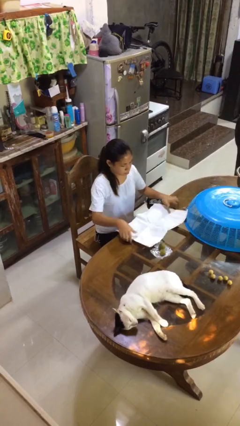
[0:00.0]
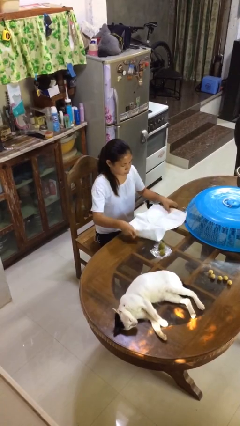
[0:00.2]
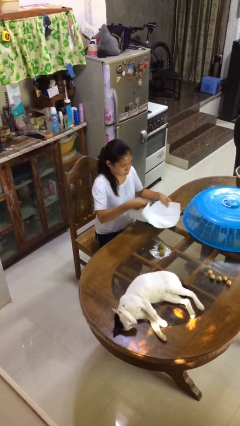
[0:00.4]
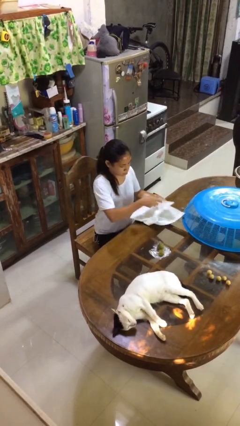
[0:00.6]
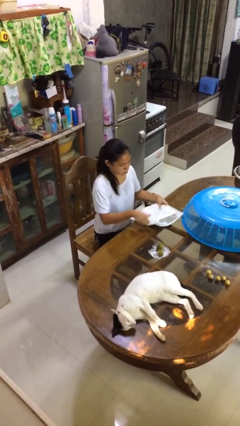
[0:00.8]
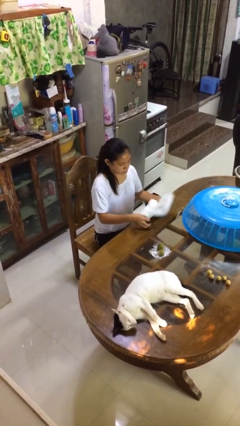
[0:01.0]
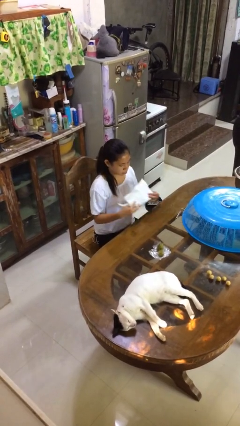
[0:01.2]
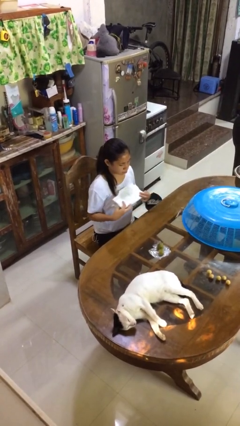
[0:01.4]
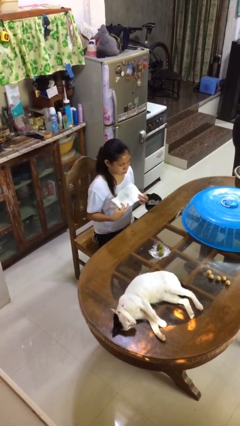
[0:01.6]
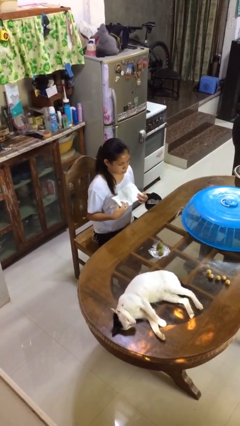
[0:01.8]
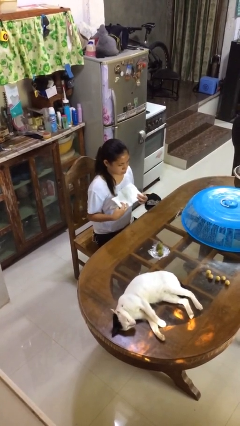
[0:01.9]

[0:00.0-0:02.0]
person folds tablecloth

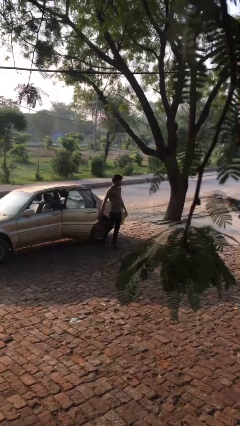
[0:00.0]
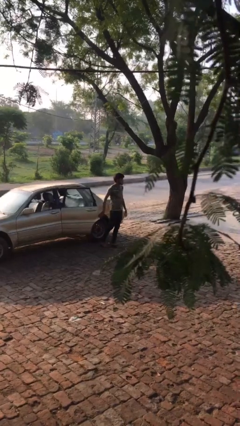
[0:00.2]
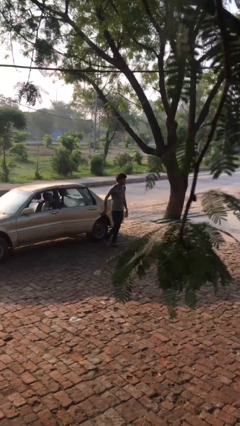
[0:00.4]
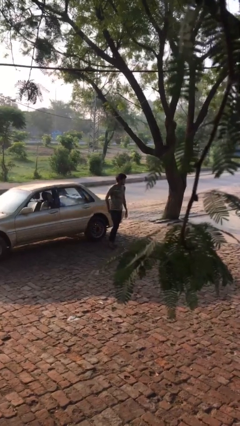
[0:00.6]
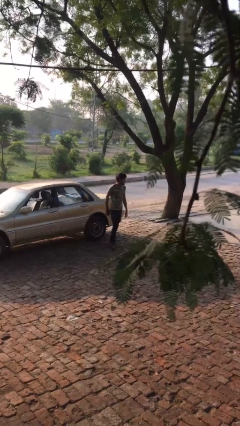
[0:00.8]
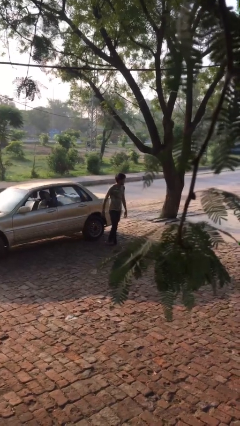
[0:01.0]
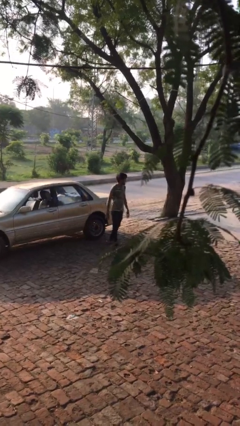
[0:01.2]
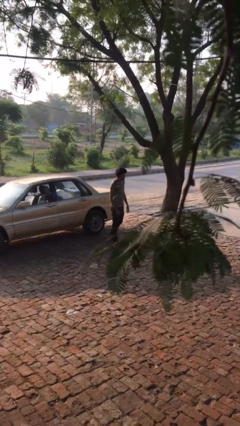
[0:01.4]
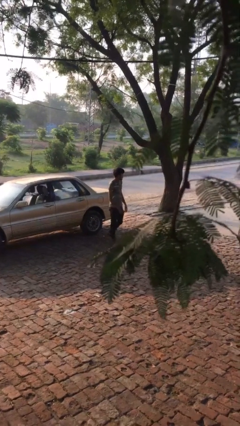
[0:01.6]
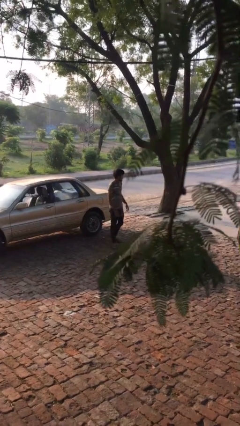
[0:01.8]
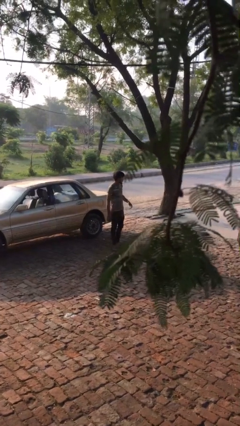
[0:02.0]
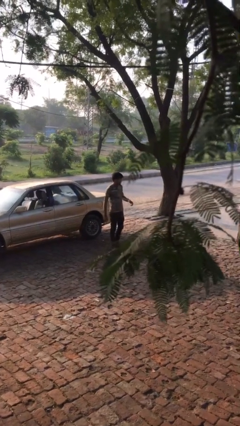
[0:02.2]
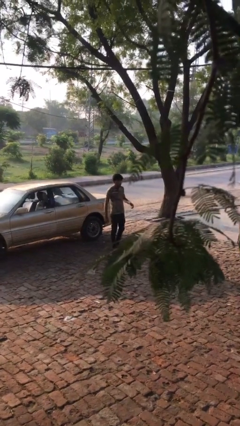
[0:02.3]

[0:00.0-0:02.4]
person closes car door

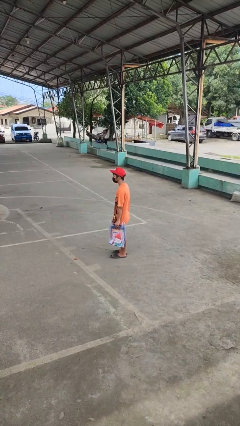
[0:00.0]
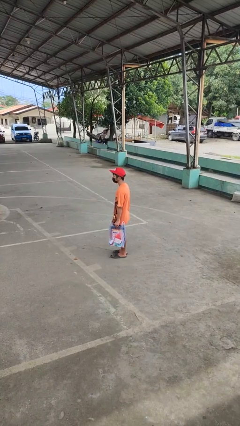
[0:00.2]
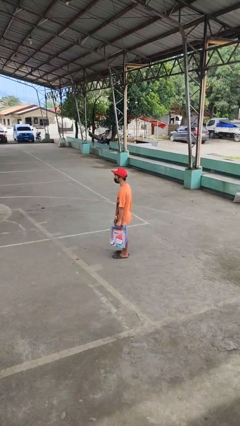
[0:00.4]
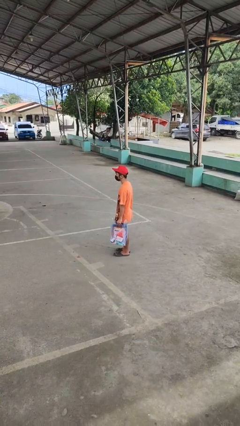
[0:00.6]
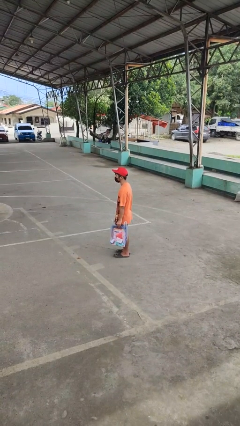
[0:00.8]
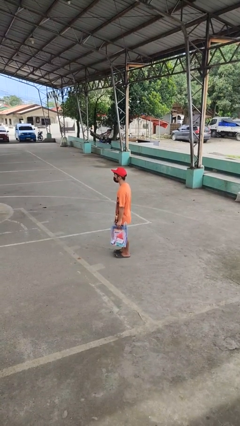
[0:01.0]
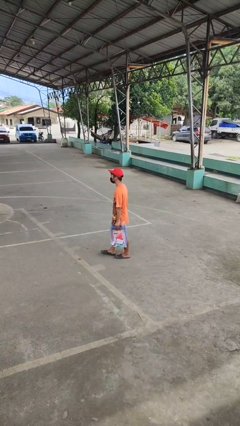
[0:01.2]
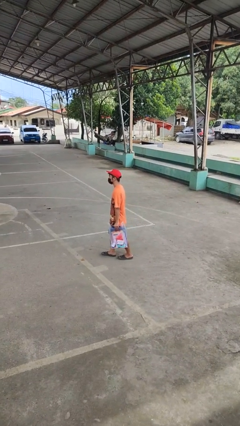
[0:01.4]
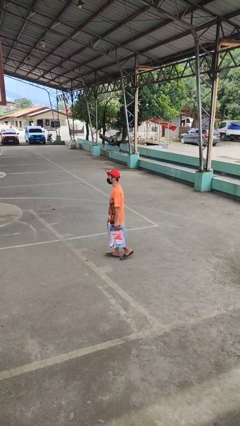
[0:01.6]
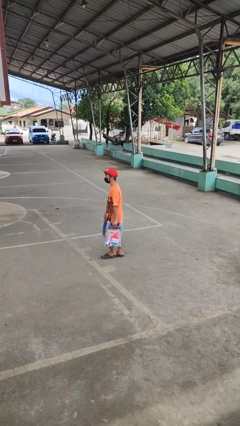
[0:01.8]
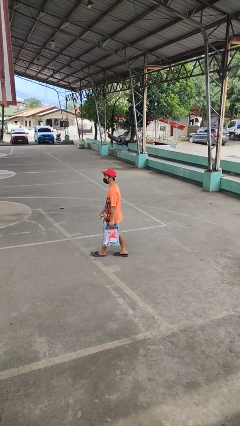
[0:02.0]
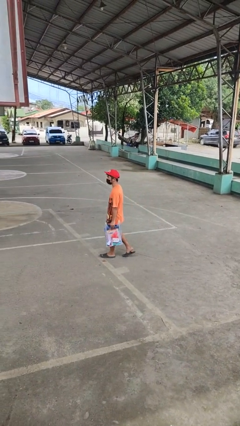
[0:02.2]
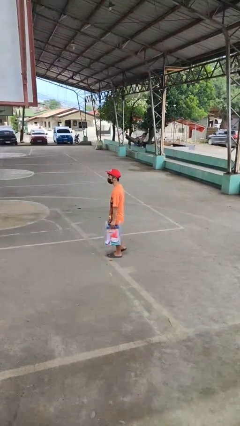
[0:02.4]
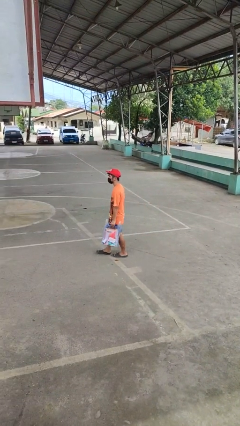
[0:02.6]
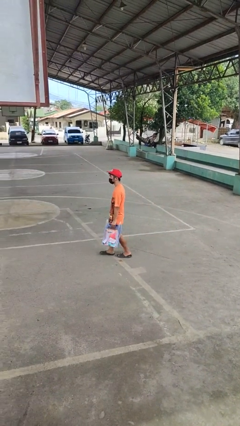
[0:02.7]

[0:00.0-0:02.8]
person carries groceries

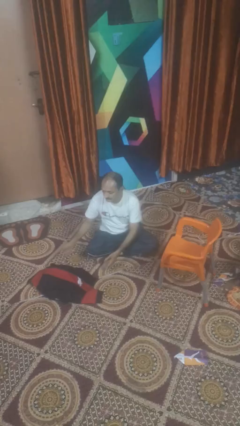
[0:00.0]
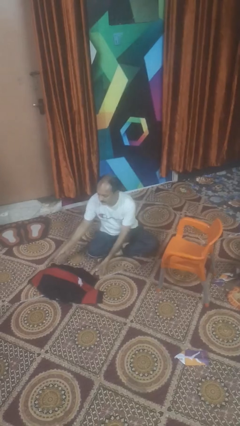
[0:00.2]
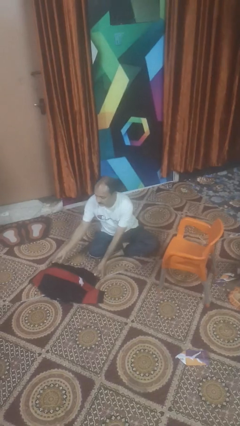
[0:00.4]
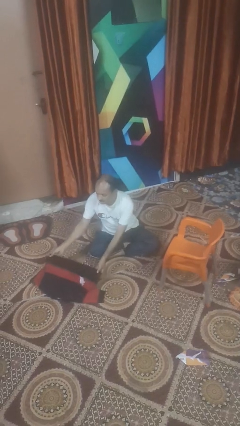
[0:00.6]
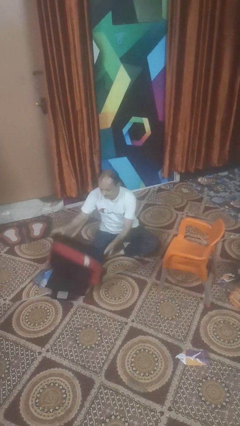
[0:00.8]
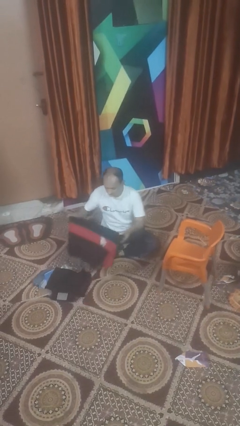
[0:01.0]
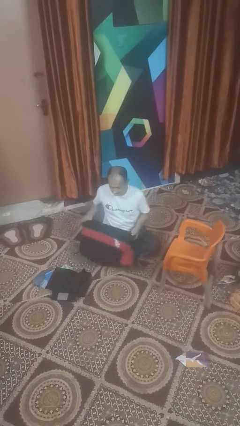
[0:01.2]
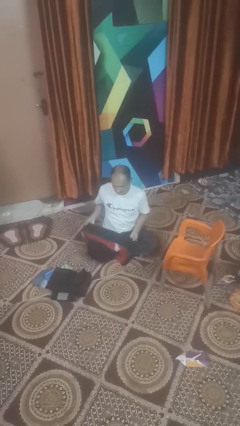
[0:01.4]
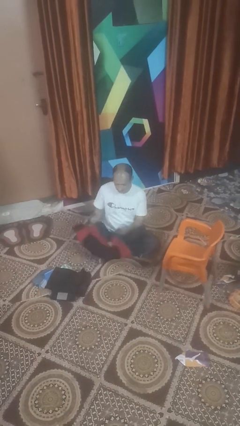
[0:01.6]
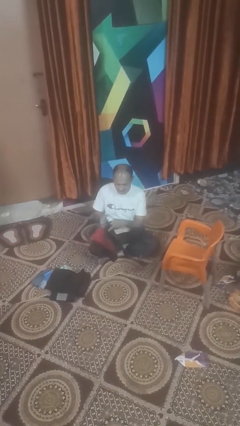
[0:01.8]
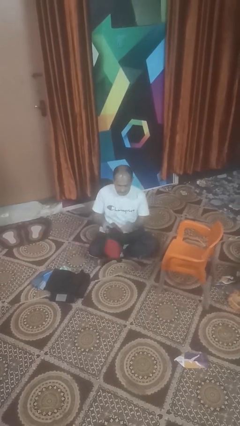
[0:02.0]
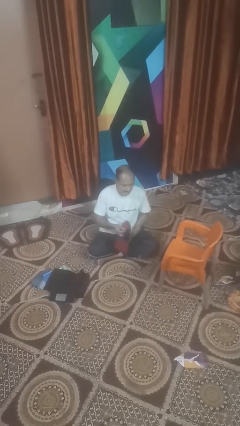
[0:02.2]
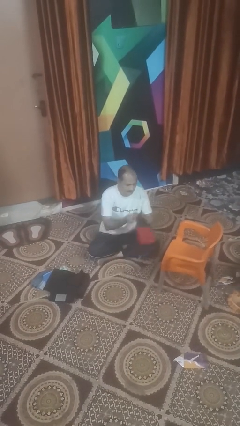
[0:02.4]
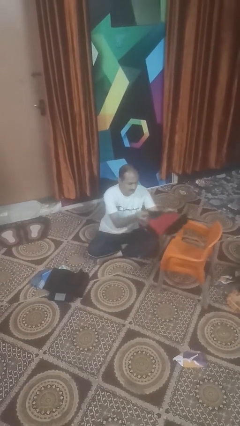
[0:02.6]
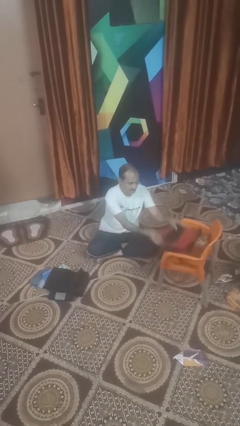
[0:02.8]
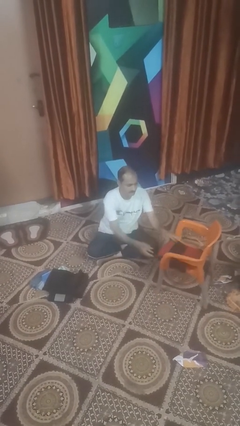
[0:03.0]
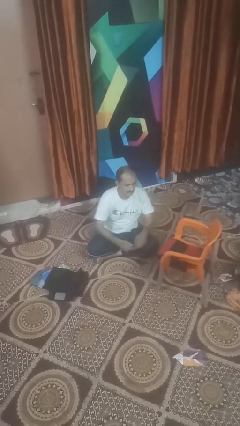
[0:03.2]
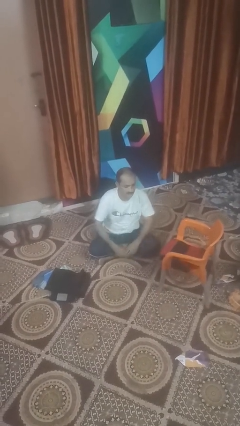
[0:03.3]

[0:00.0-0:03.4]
person folds shirt

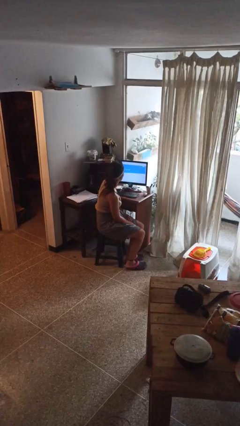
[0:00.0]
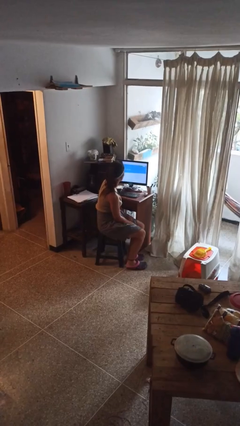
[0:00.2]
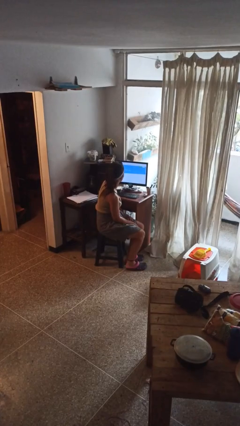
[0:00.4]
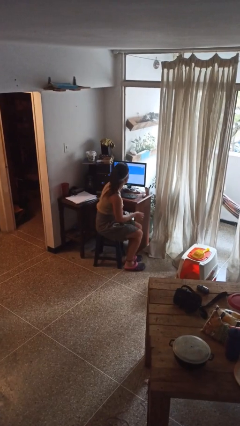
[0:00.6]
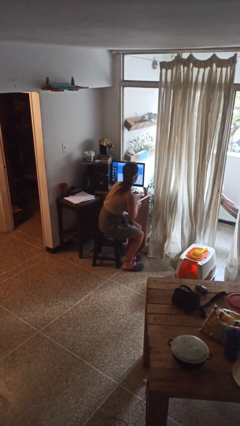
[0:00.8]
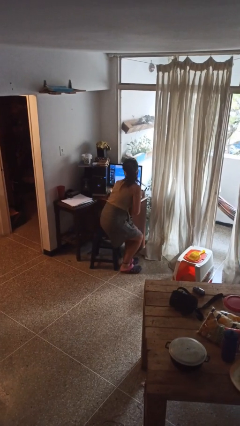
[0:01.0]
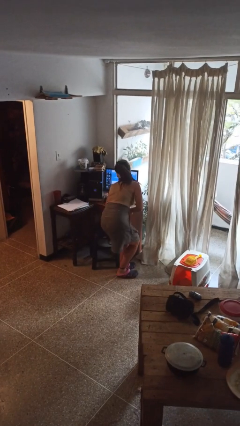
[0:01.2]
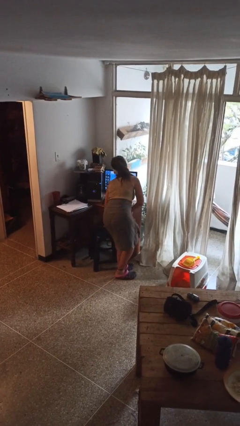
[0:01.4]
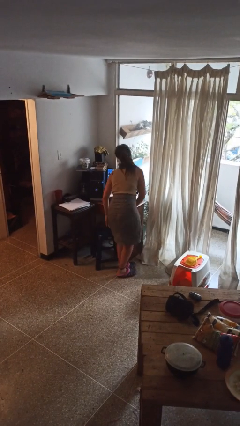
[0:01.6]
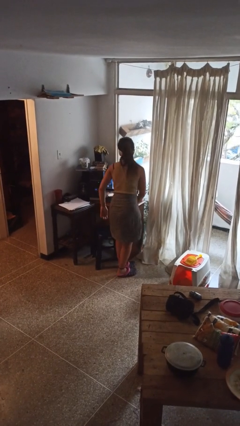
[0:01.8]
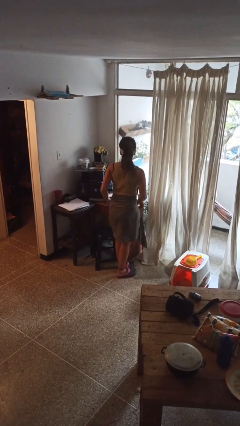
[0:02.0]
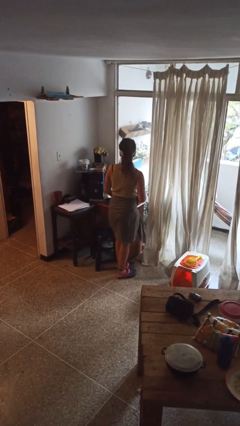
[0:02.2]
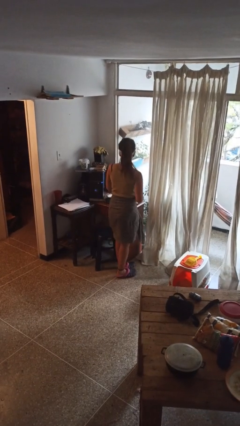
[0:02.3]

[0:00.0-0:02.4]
person stands up

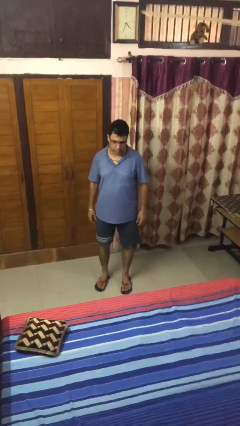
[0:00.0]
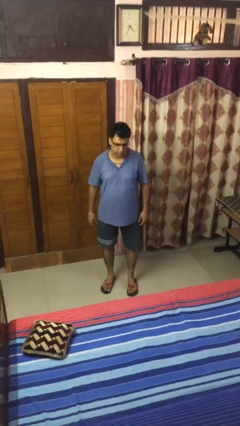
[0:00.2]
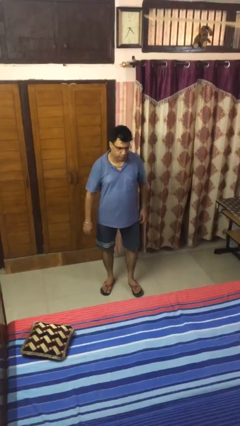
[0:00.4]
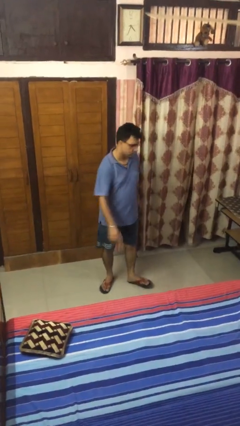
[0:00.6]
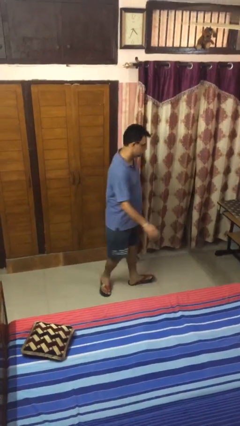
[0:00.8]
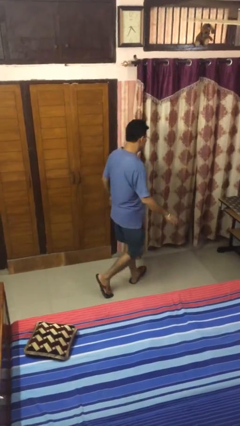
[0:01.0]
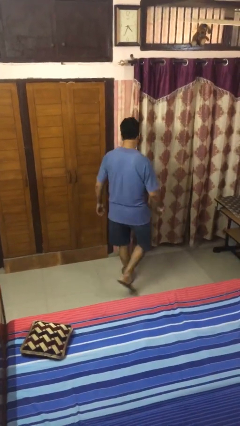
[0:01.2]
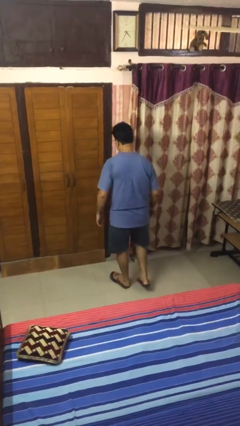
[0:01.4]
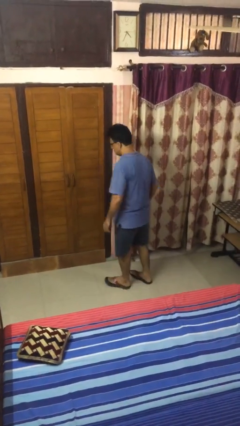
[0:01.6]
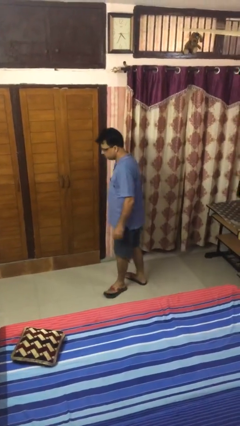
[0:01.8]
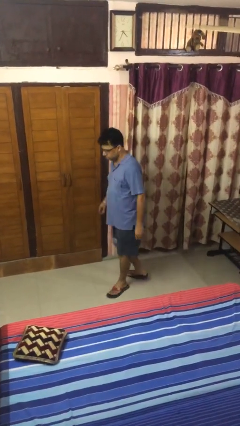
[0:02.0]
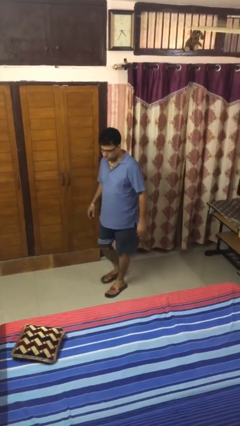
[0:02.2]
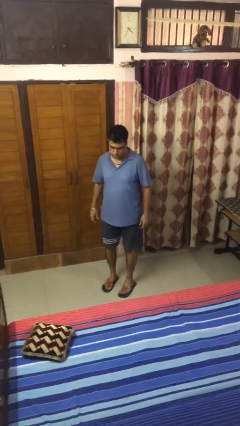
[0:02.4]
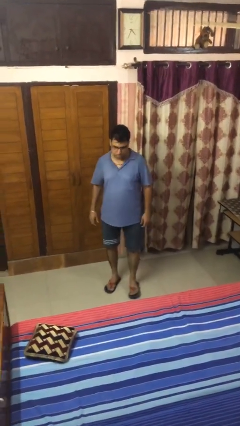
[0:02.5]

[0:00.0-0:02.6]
person twirls

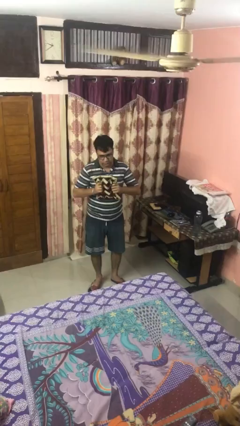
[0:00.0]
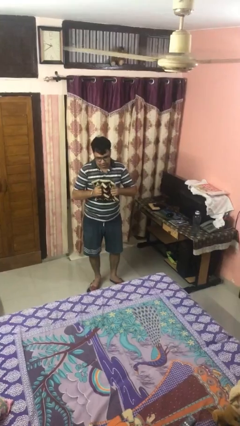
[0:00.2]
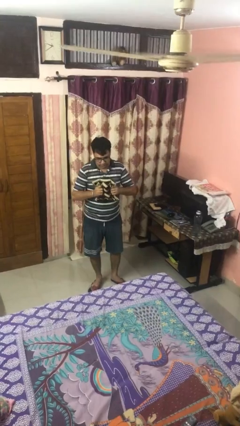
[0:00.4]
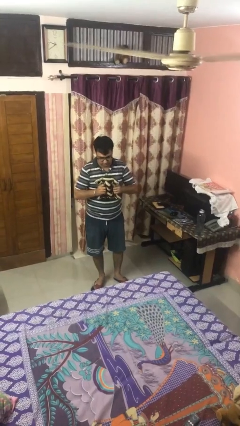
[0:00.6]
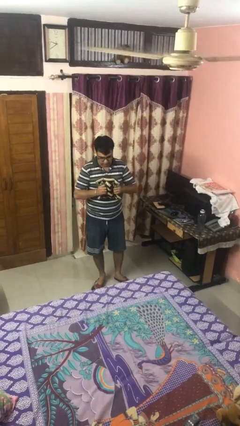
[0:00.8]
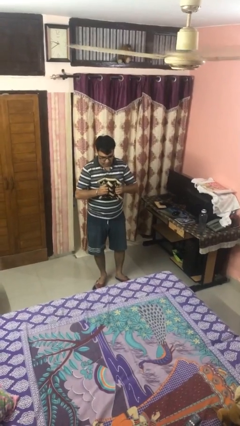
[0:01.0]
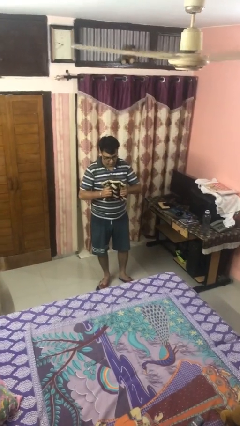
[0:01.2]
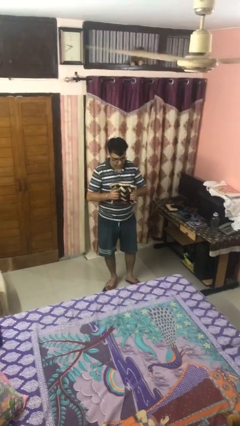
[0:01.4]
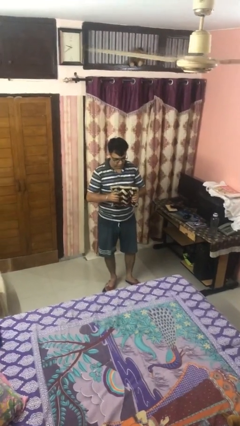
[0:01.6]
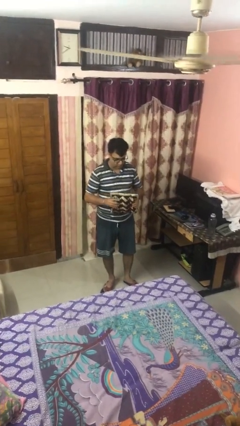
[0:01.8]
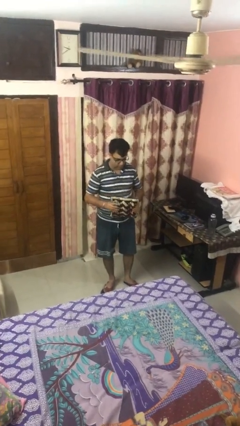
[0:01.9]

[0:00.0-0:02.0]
person squeezes object
